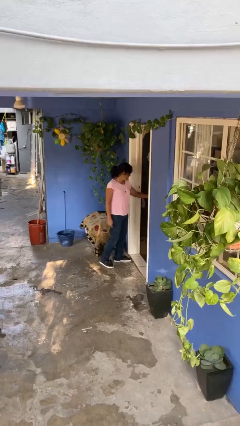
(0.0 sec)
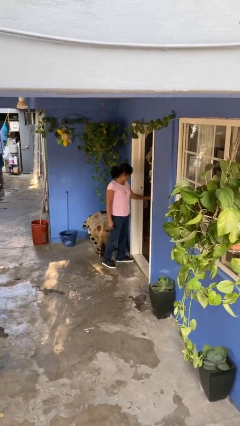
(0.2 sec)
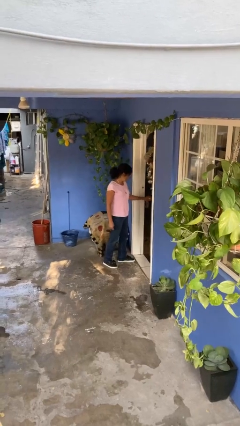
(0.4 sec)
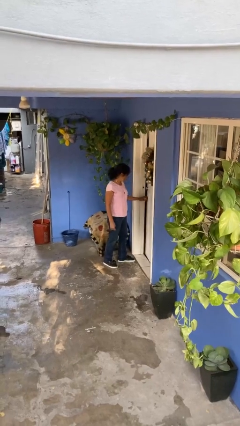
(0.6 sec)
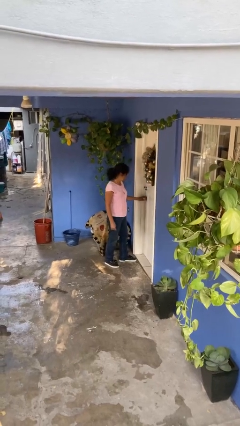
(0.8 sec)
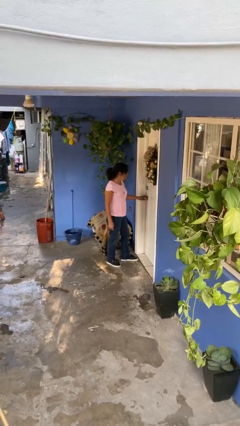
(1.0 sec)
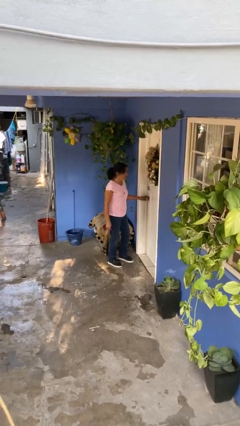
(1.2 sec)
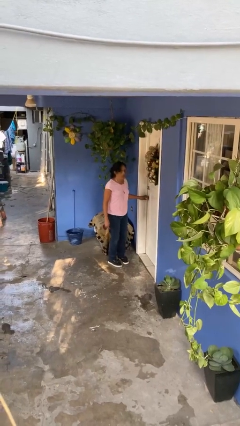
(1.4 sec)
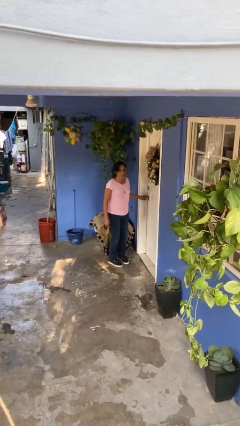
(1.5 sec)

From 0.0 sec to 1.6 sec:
person closes facility door

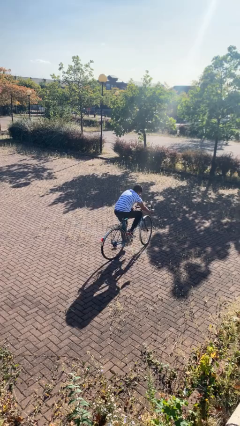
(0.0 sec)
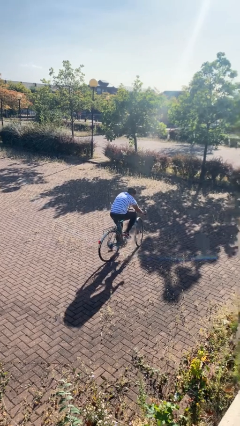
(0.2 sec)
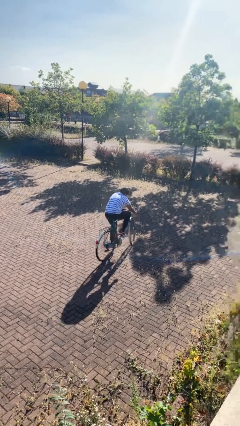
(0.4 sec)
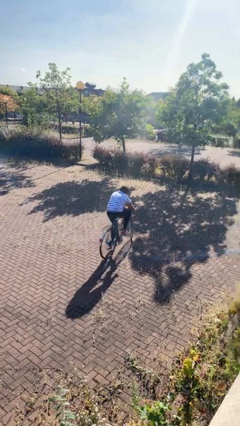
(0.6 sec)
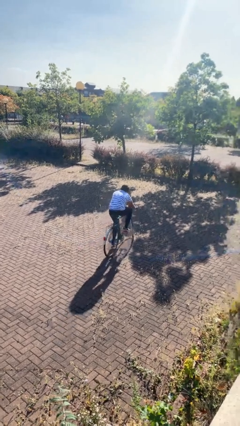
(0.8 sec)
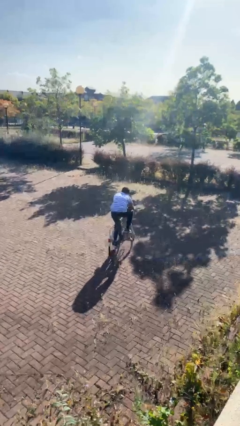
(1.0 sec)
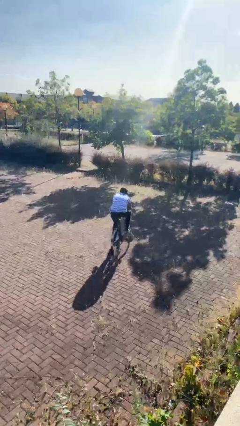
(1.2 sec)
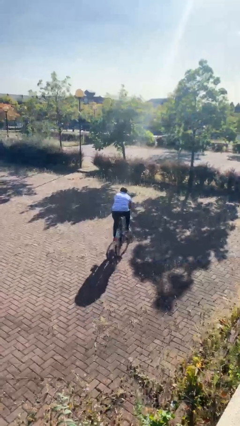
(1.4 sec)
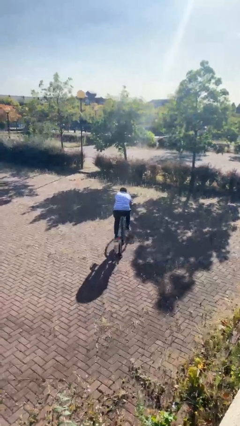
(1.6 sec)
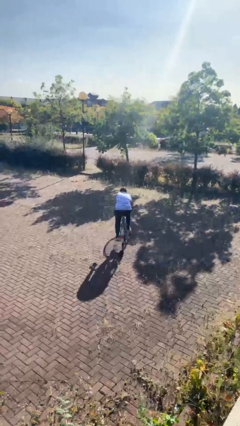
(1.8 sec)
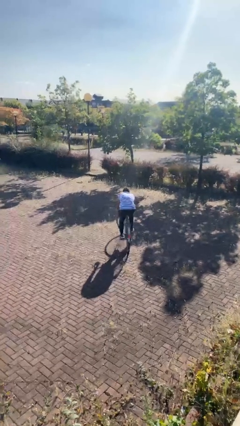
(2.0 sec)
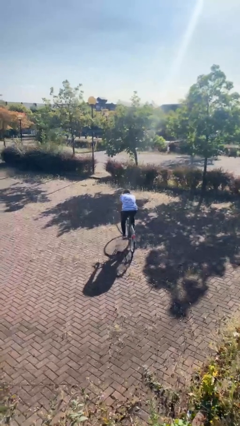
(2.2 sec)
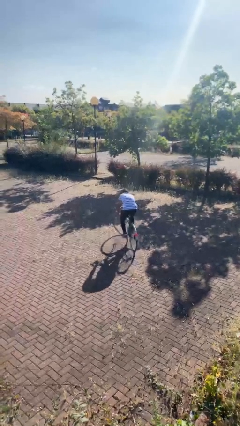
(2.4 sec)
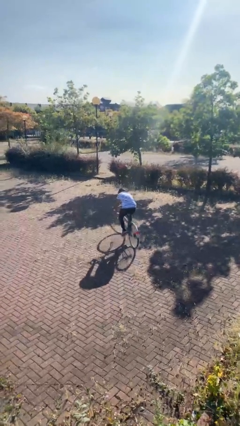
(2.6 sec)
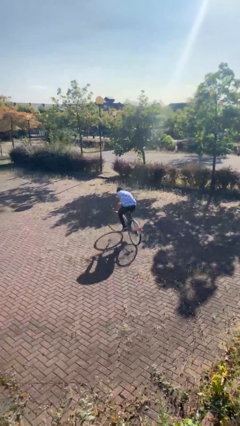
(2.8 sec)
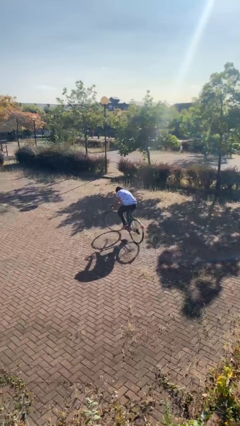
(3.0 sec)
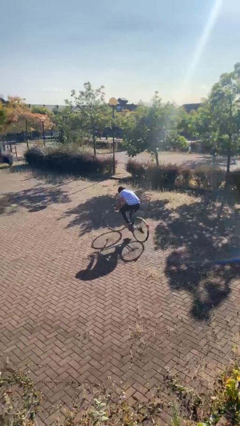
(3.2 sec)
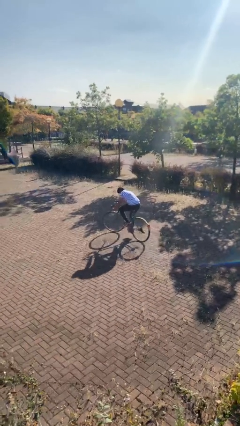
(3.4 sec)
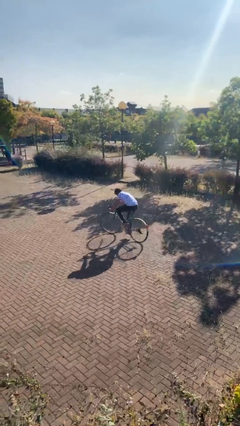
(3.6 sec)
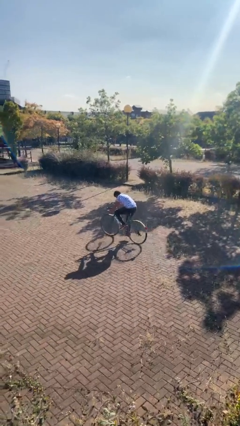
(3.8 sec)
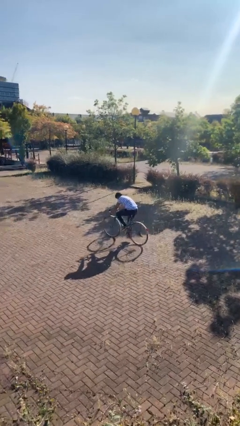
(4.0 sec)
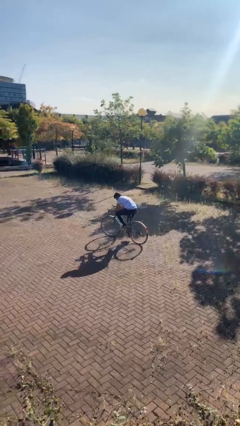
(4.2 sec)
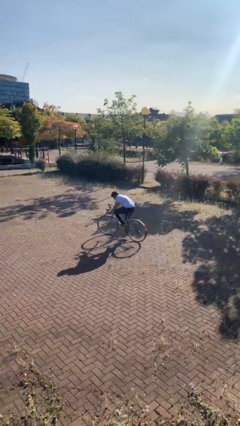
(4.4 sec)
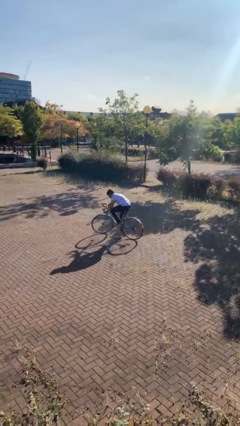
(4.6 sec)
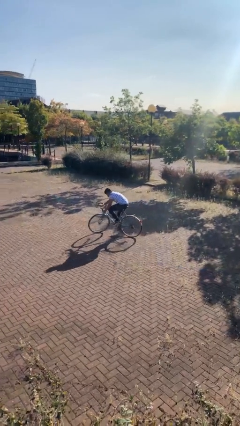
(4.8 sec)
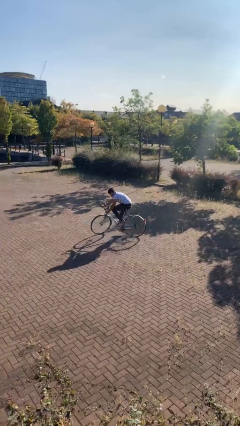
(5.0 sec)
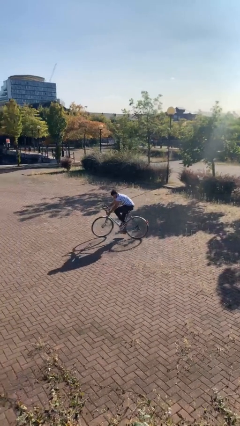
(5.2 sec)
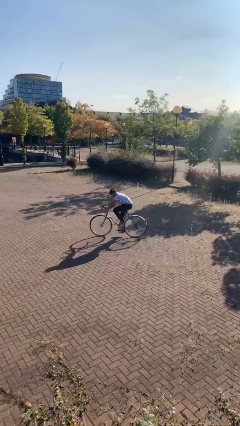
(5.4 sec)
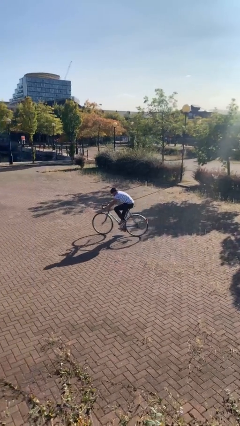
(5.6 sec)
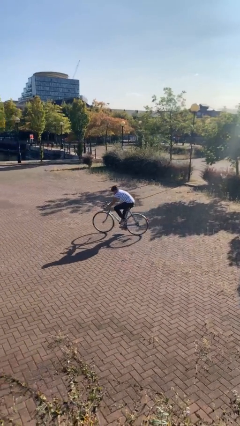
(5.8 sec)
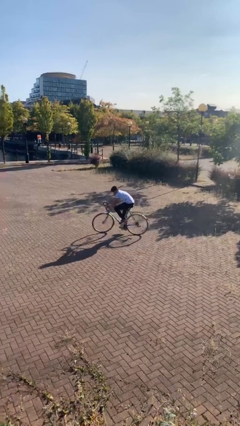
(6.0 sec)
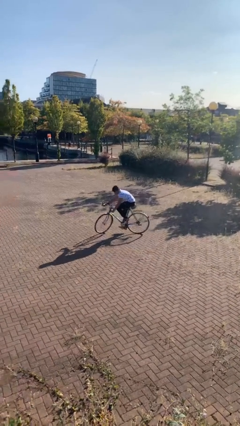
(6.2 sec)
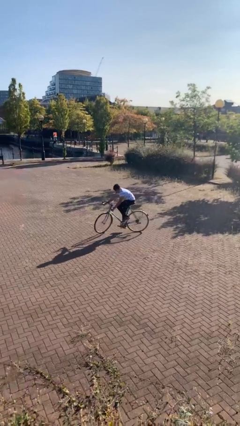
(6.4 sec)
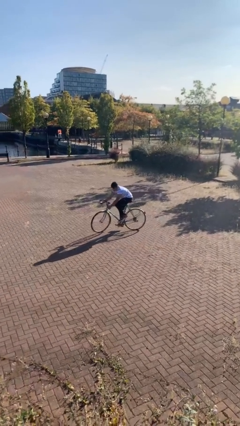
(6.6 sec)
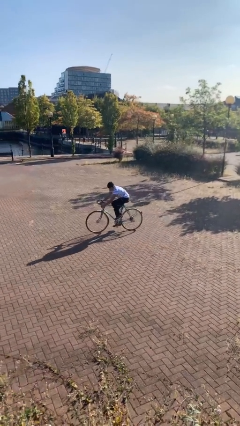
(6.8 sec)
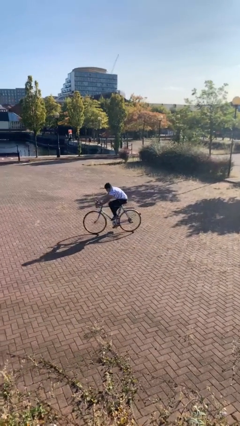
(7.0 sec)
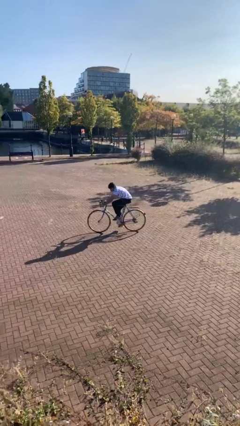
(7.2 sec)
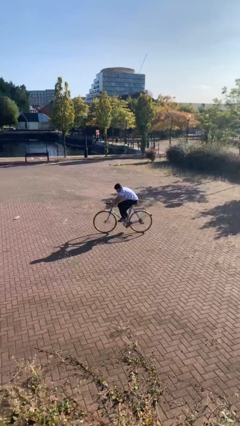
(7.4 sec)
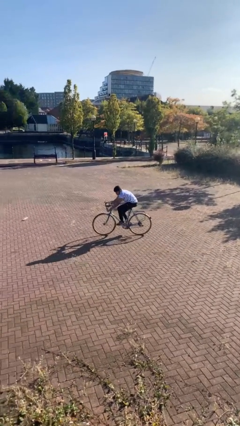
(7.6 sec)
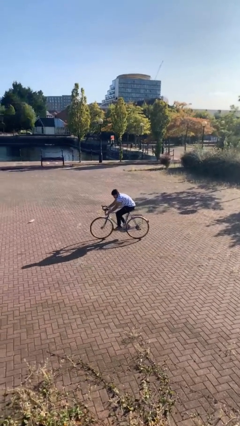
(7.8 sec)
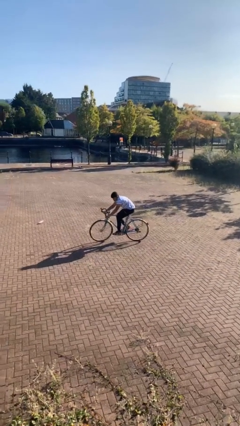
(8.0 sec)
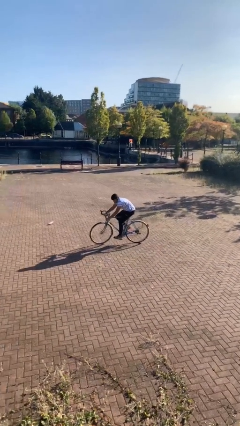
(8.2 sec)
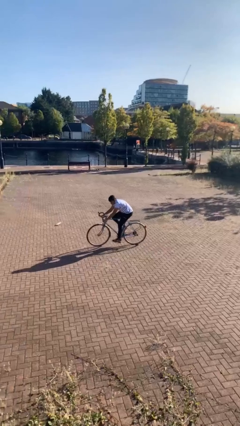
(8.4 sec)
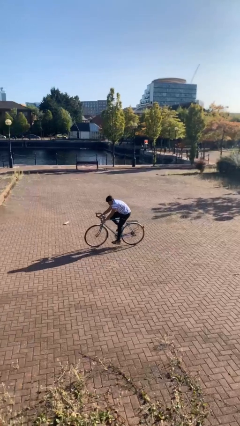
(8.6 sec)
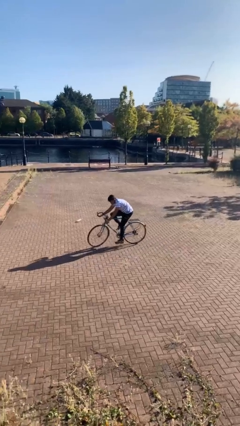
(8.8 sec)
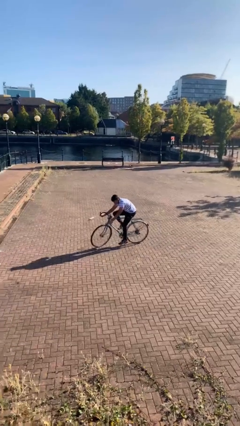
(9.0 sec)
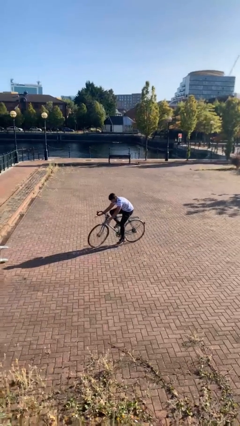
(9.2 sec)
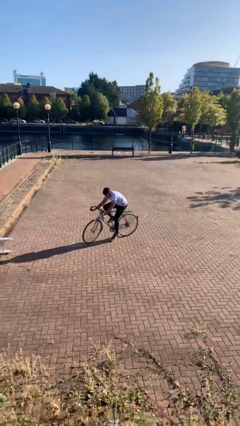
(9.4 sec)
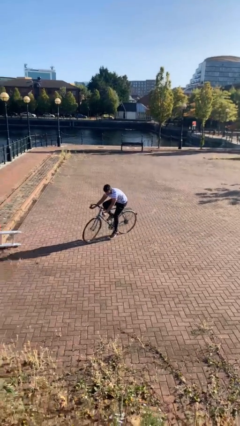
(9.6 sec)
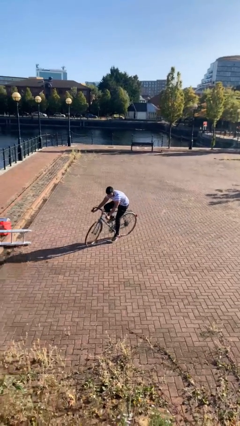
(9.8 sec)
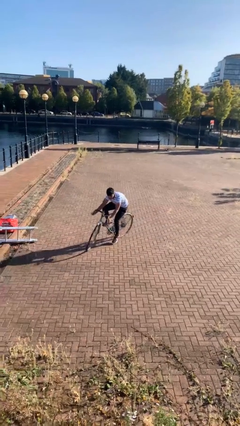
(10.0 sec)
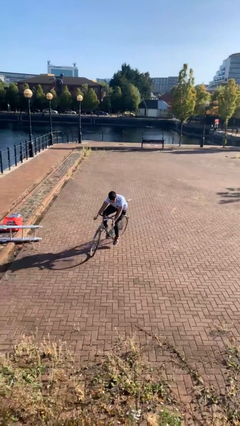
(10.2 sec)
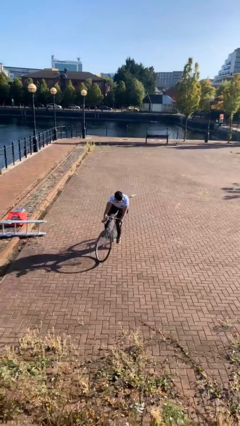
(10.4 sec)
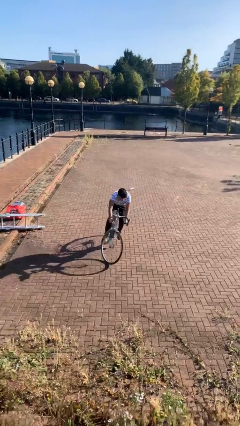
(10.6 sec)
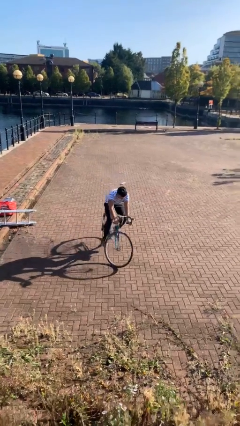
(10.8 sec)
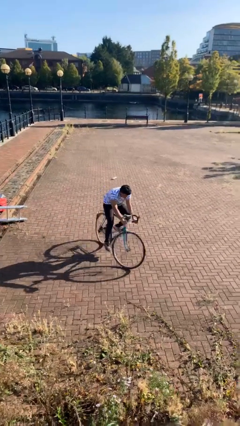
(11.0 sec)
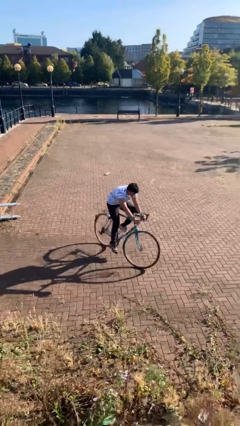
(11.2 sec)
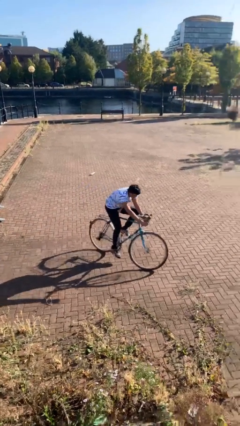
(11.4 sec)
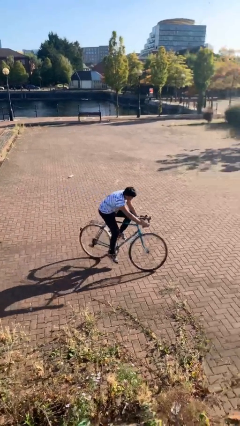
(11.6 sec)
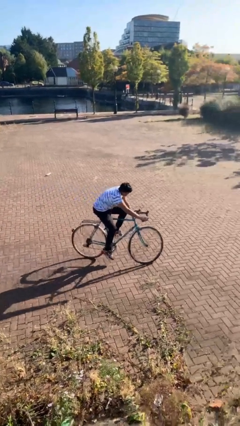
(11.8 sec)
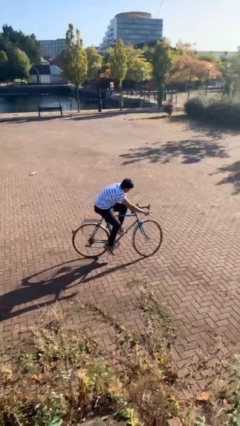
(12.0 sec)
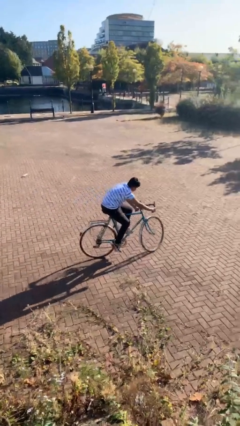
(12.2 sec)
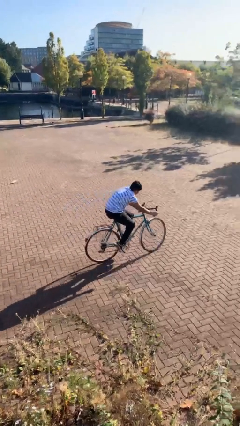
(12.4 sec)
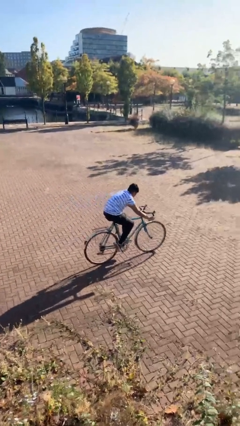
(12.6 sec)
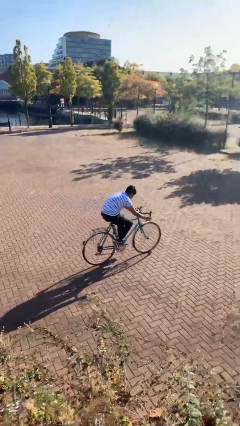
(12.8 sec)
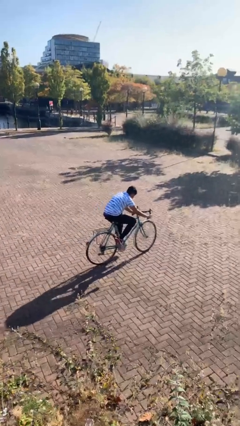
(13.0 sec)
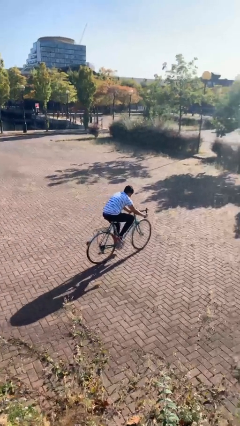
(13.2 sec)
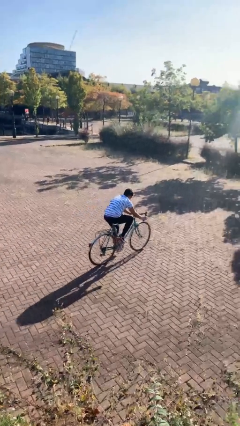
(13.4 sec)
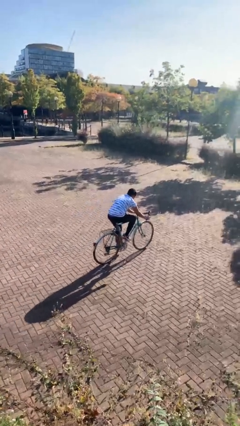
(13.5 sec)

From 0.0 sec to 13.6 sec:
person rides bicycle

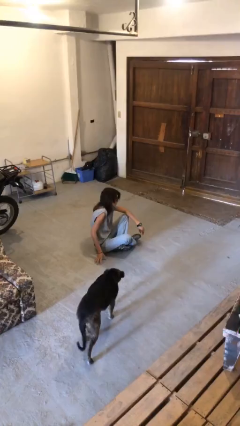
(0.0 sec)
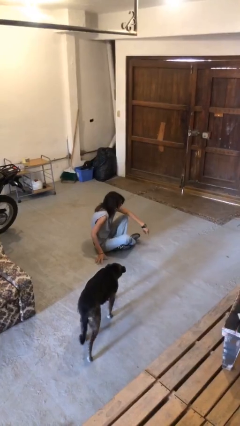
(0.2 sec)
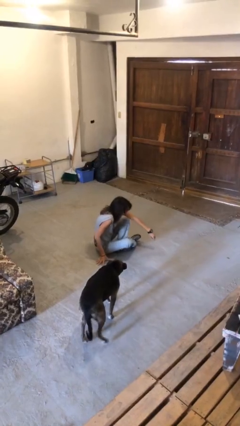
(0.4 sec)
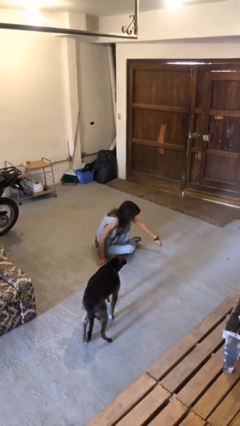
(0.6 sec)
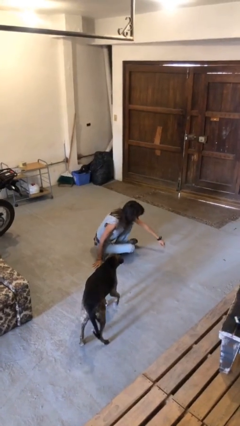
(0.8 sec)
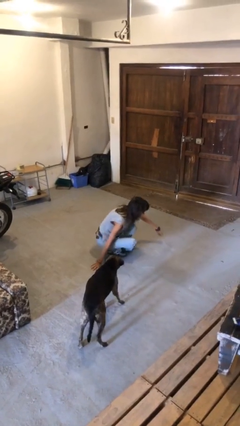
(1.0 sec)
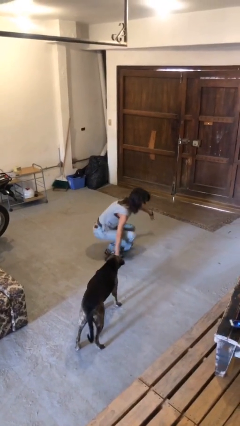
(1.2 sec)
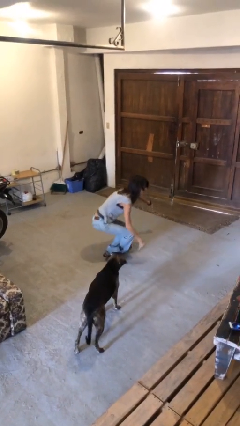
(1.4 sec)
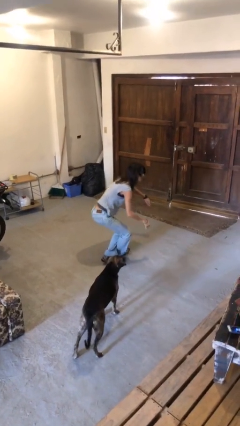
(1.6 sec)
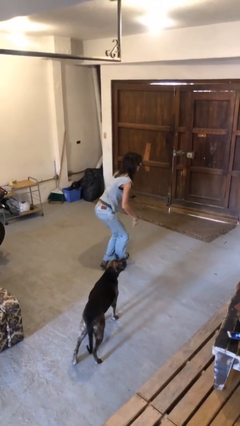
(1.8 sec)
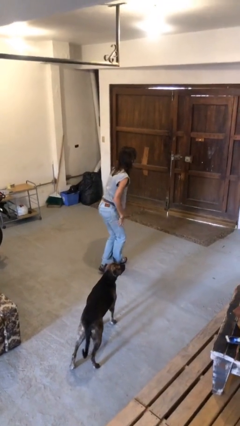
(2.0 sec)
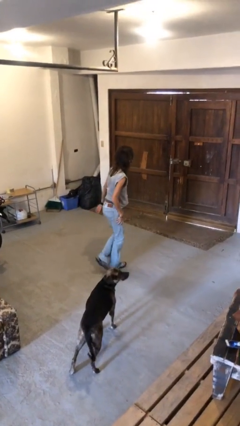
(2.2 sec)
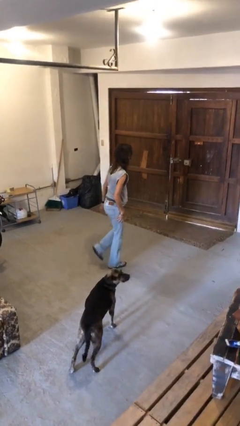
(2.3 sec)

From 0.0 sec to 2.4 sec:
person stands up from floor
